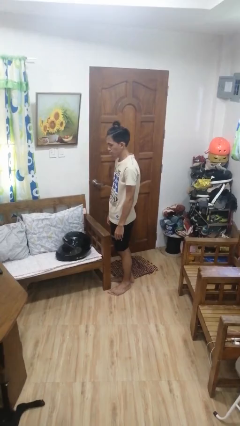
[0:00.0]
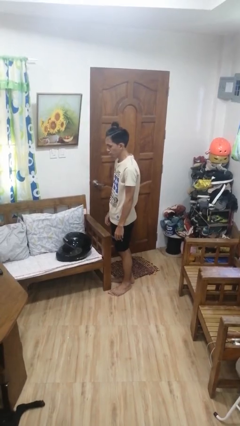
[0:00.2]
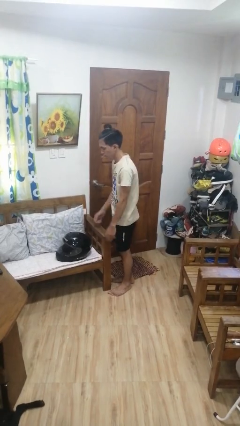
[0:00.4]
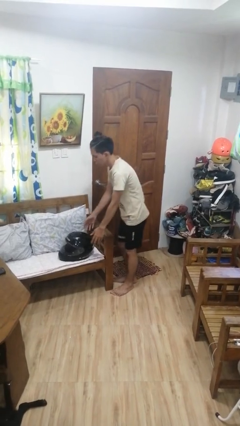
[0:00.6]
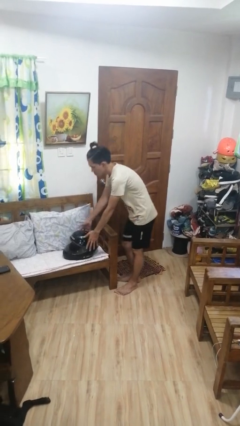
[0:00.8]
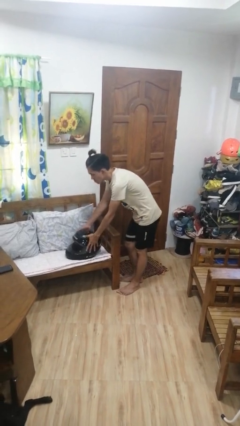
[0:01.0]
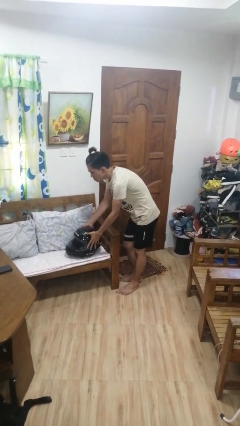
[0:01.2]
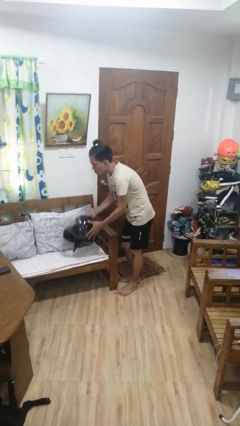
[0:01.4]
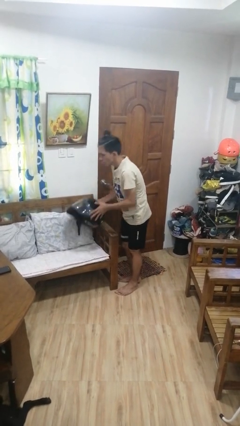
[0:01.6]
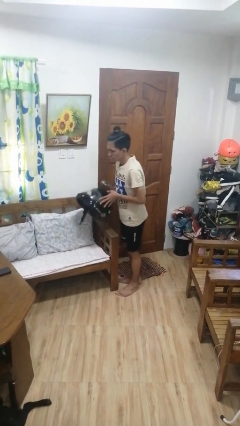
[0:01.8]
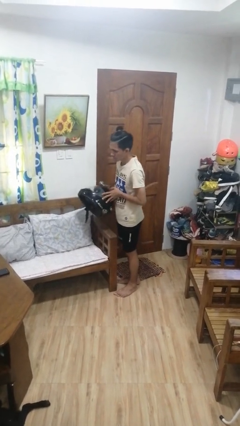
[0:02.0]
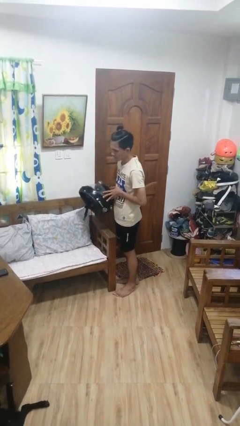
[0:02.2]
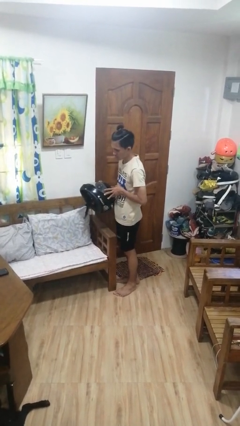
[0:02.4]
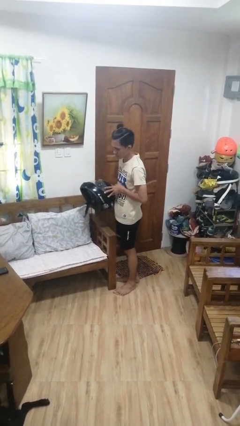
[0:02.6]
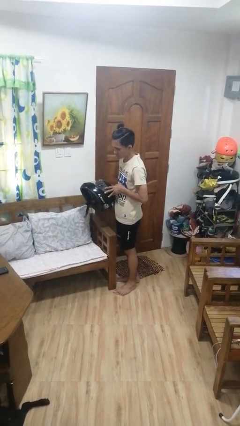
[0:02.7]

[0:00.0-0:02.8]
person picks up object from couch

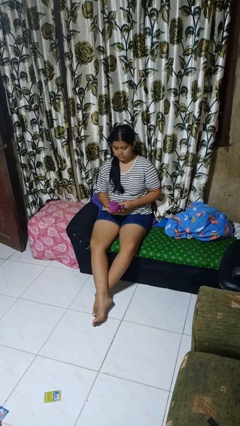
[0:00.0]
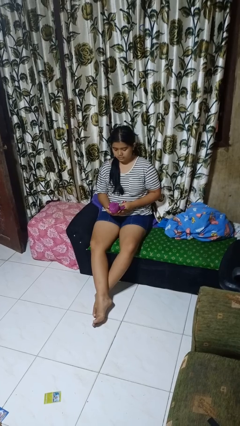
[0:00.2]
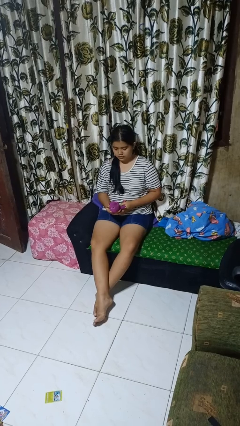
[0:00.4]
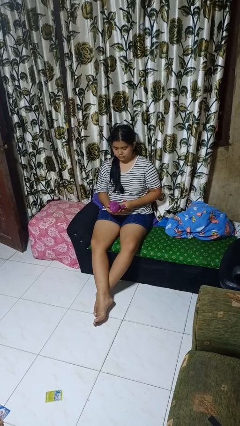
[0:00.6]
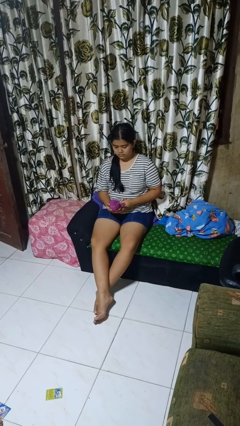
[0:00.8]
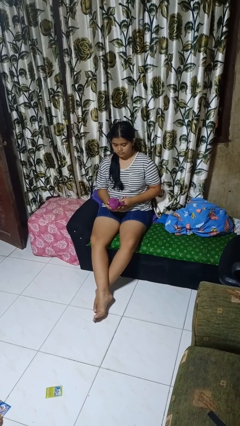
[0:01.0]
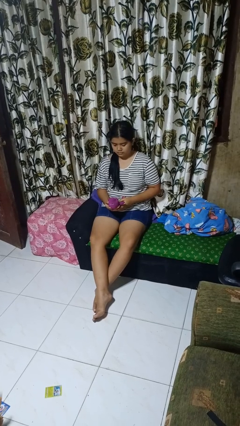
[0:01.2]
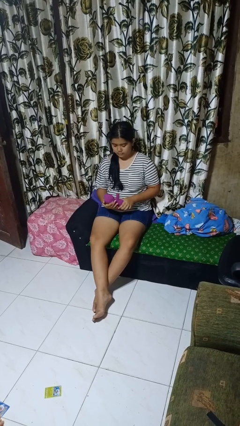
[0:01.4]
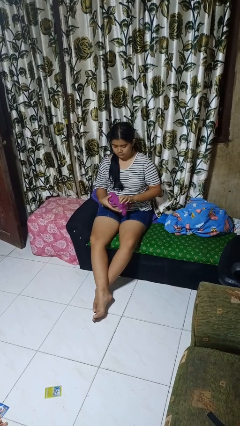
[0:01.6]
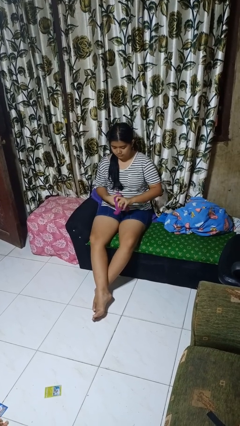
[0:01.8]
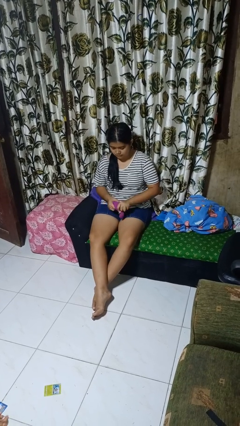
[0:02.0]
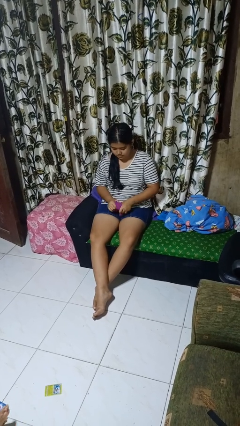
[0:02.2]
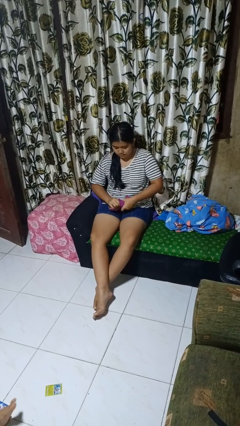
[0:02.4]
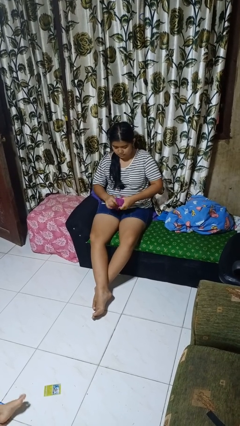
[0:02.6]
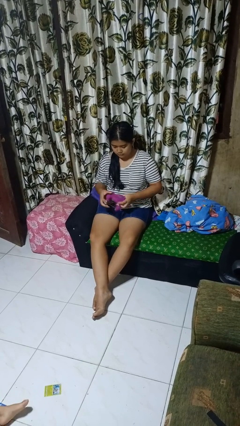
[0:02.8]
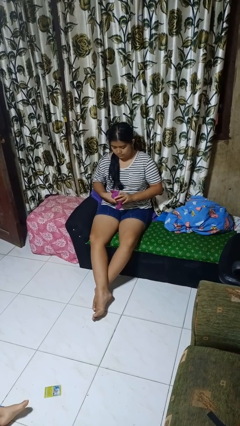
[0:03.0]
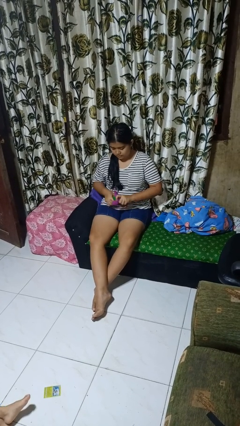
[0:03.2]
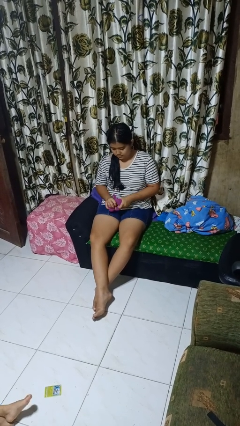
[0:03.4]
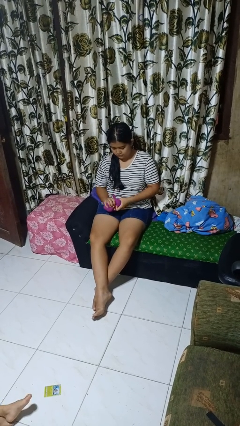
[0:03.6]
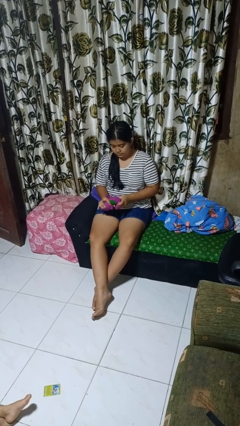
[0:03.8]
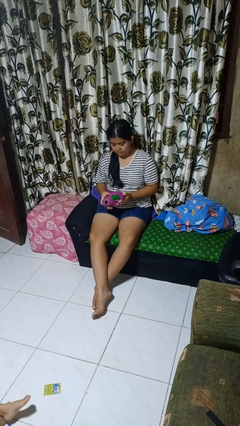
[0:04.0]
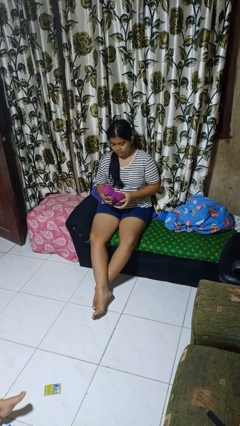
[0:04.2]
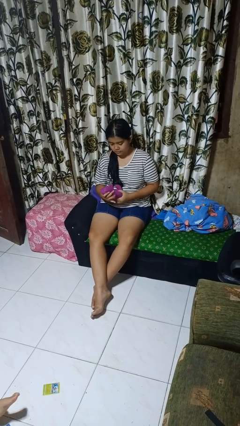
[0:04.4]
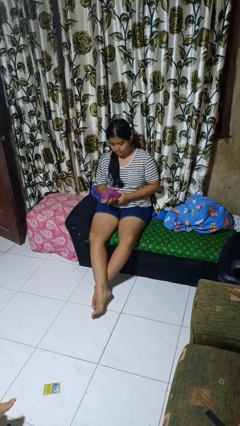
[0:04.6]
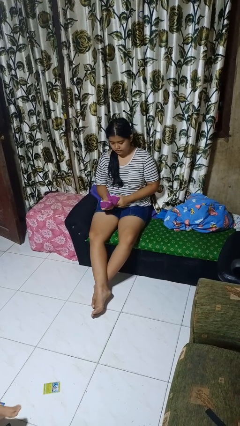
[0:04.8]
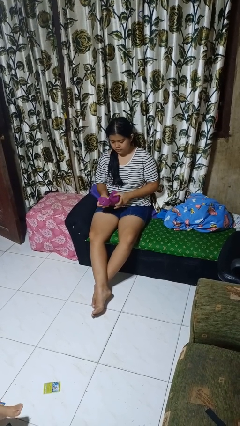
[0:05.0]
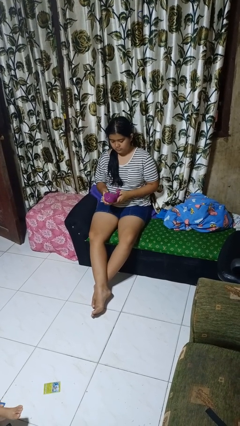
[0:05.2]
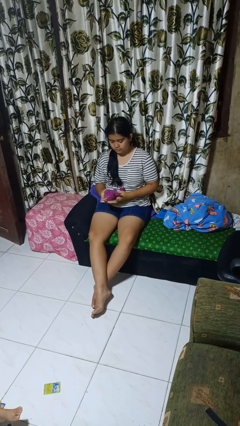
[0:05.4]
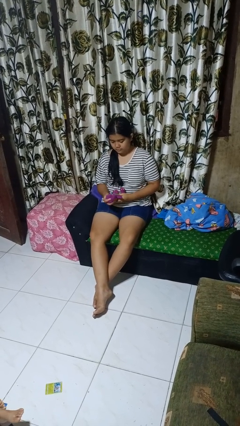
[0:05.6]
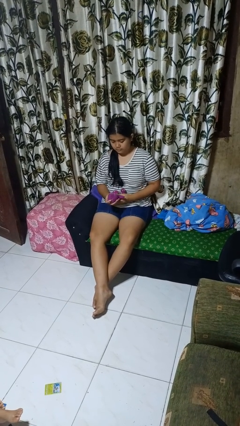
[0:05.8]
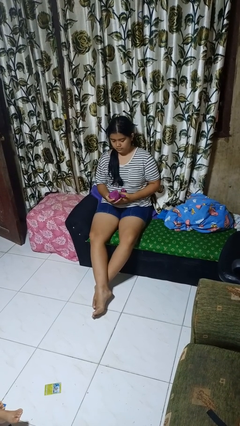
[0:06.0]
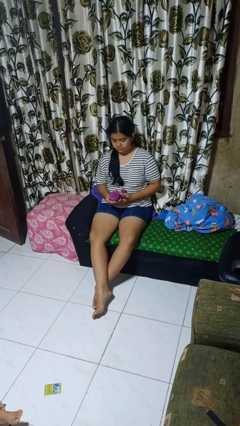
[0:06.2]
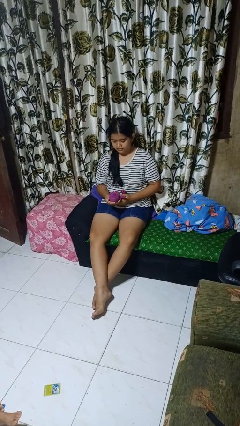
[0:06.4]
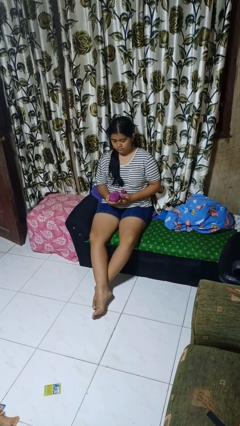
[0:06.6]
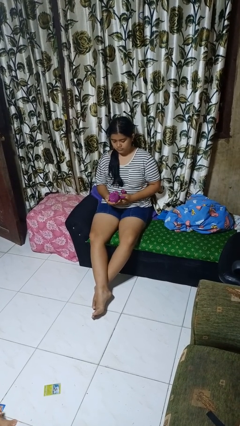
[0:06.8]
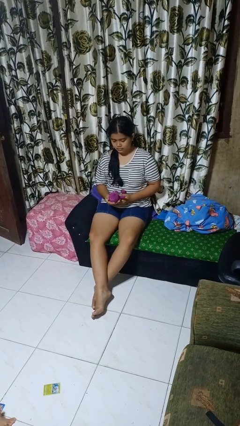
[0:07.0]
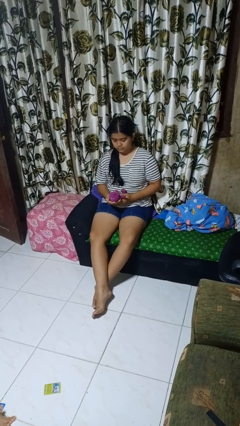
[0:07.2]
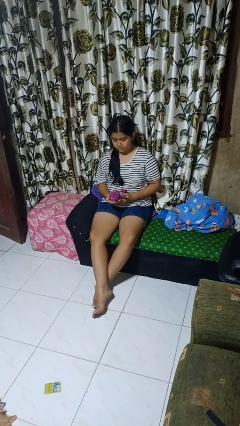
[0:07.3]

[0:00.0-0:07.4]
person squeezes object

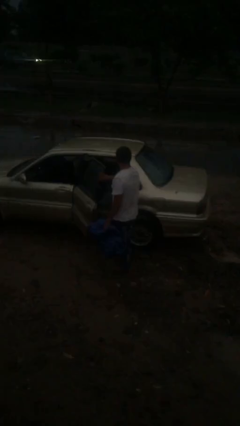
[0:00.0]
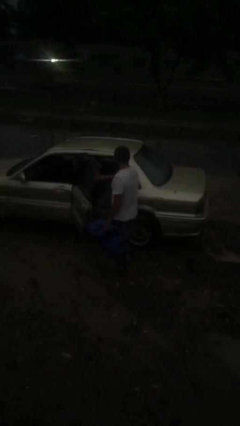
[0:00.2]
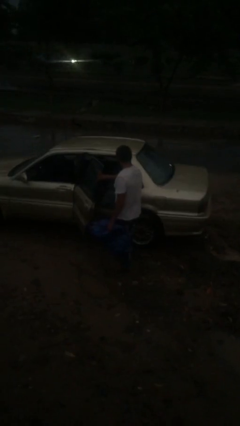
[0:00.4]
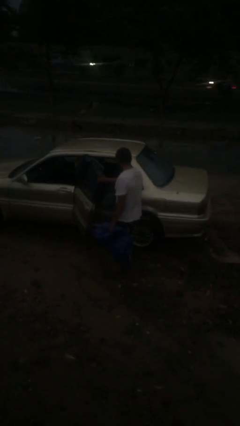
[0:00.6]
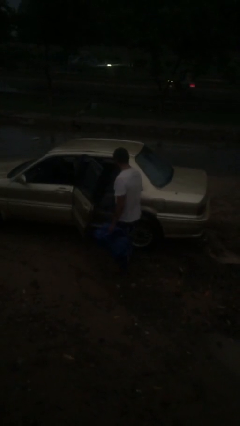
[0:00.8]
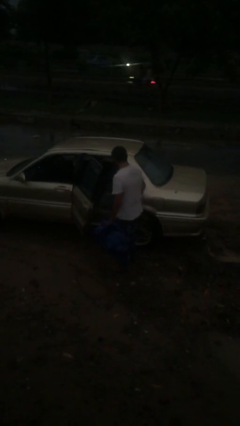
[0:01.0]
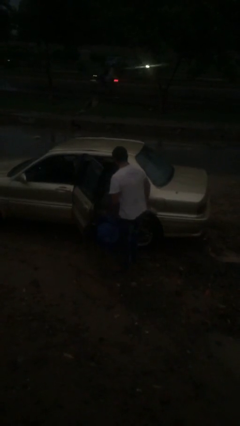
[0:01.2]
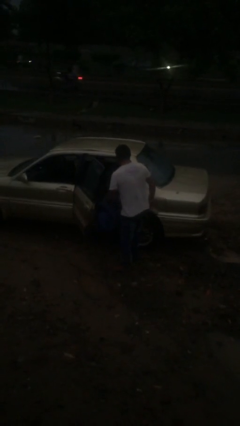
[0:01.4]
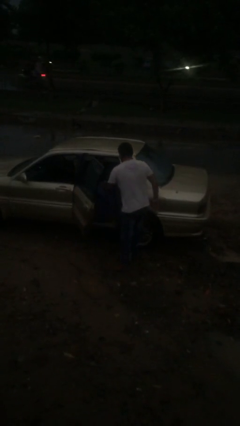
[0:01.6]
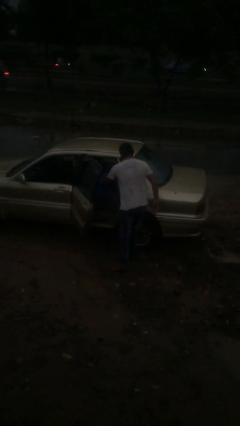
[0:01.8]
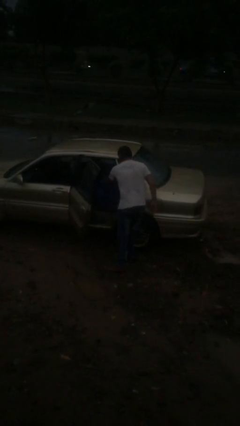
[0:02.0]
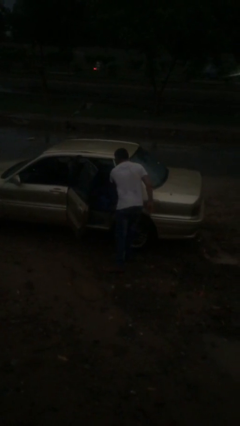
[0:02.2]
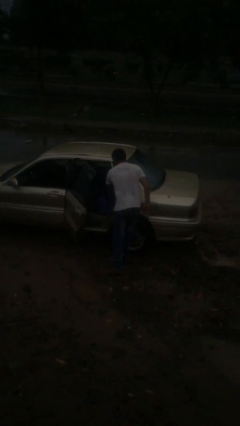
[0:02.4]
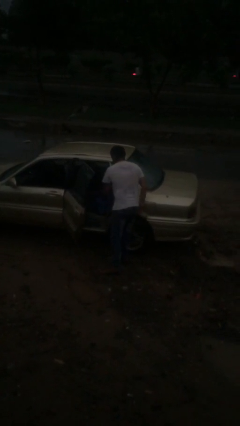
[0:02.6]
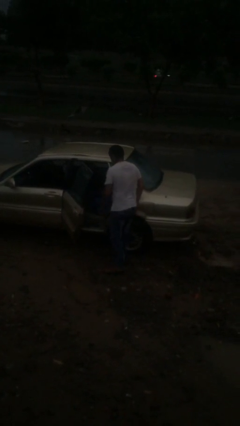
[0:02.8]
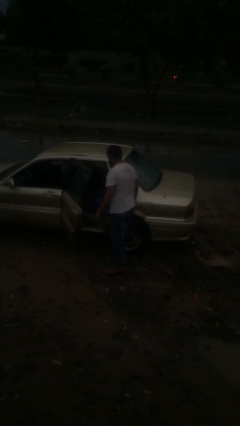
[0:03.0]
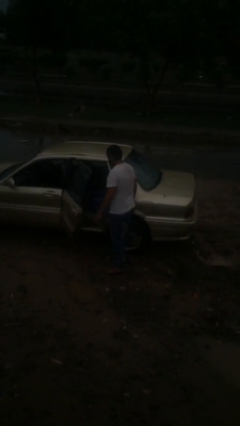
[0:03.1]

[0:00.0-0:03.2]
person loads car

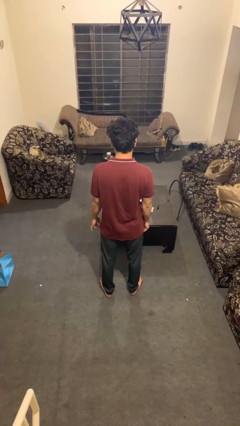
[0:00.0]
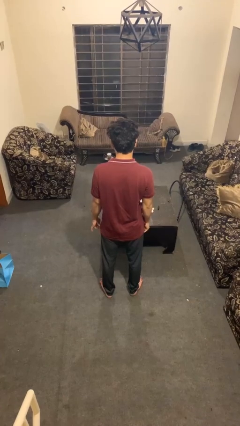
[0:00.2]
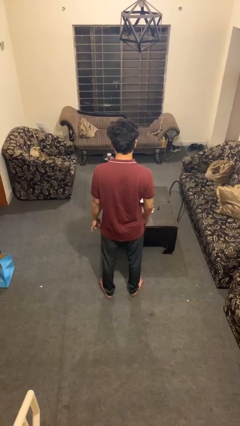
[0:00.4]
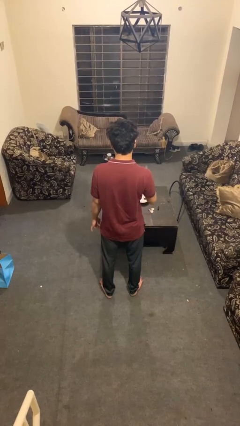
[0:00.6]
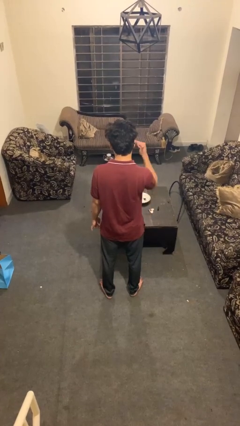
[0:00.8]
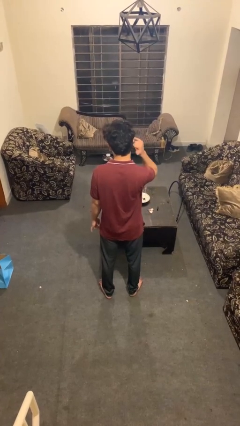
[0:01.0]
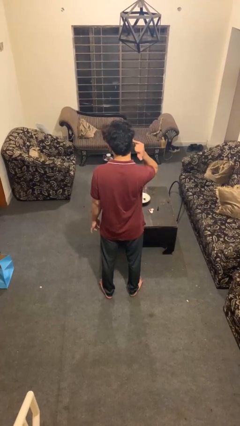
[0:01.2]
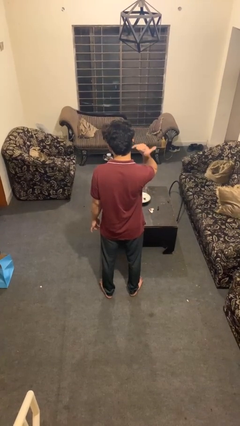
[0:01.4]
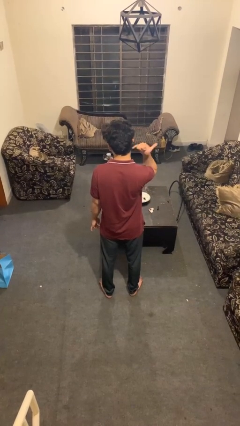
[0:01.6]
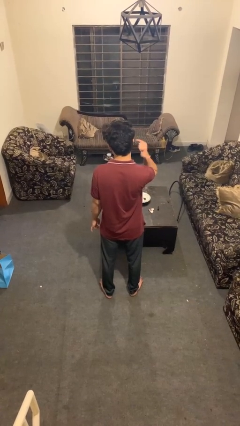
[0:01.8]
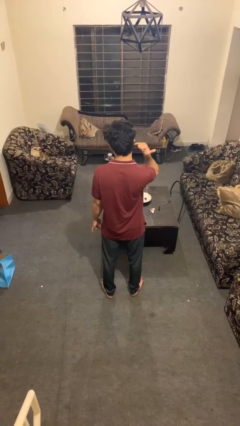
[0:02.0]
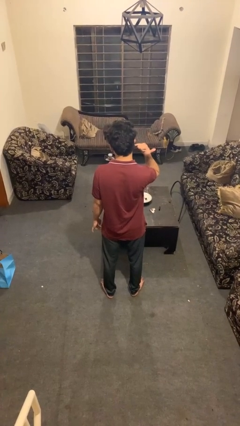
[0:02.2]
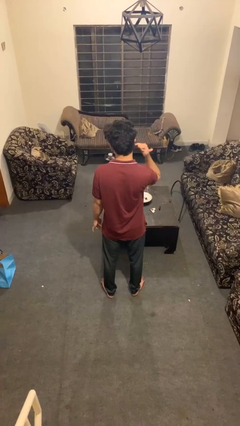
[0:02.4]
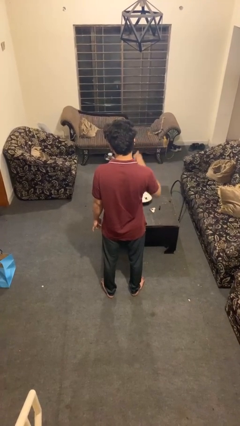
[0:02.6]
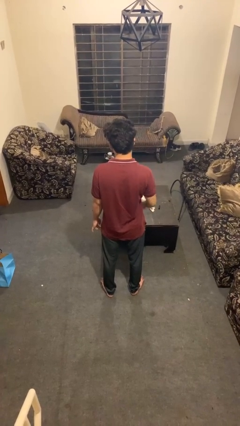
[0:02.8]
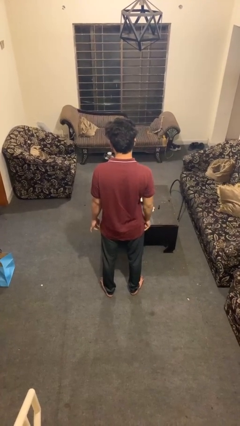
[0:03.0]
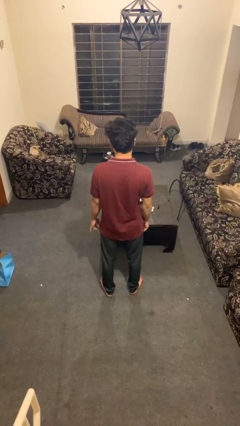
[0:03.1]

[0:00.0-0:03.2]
person gestures hang loose

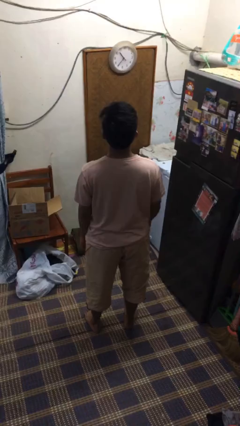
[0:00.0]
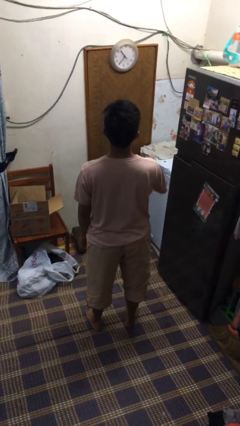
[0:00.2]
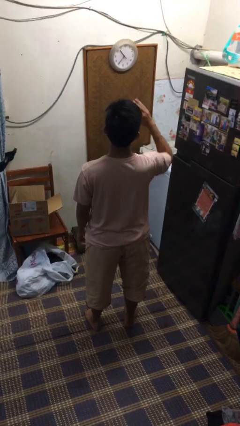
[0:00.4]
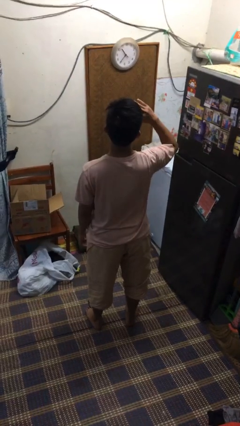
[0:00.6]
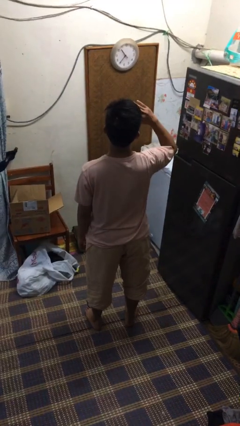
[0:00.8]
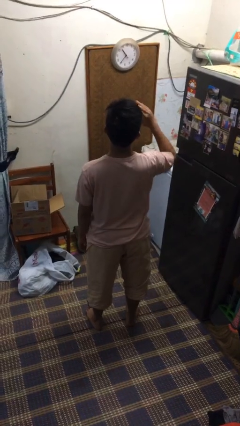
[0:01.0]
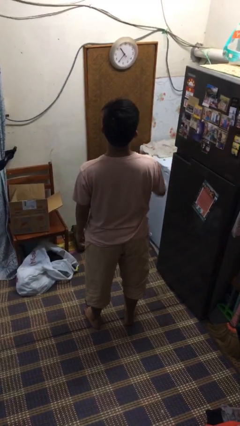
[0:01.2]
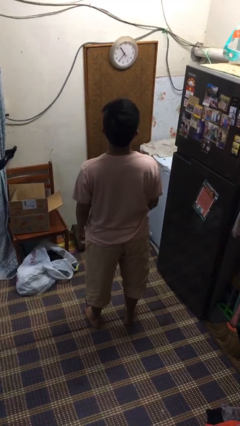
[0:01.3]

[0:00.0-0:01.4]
person salutes
